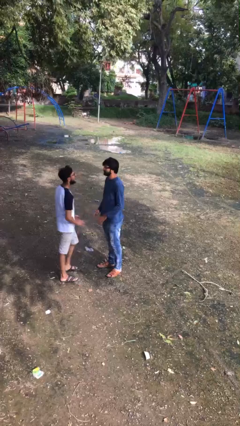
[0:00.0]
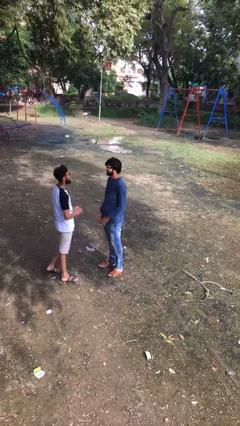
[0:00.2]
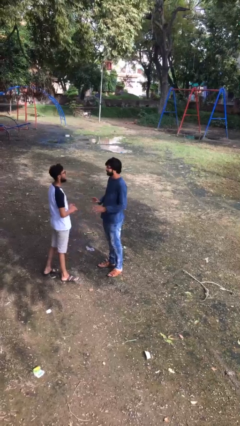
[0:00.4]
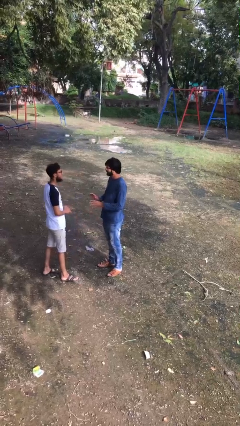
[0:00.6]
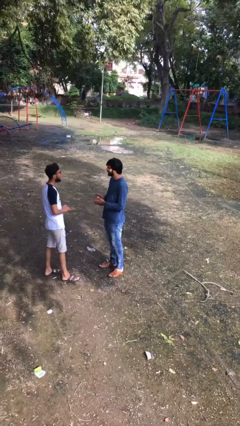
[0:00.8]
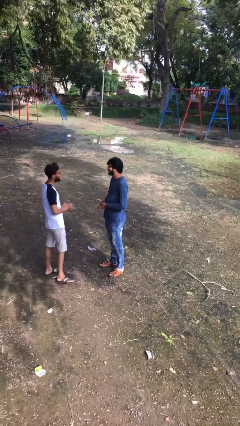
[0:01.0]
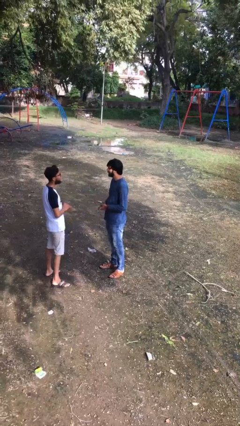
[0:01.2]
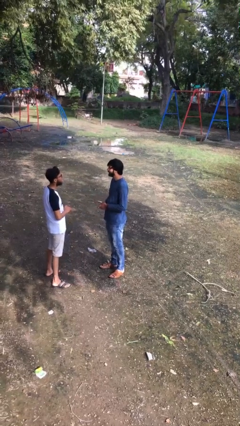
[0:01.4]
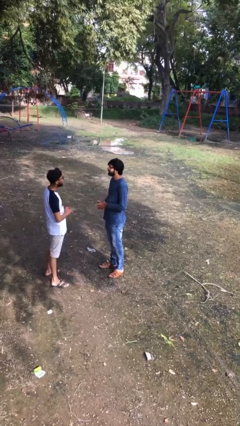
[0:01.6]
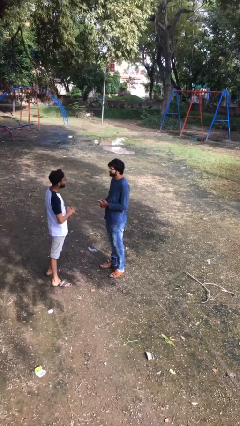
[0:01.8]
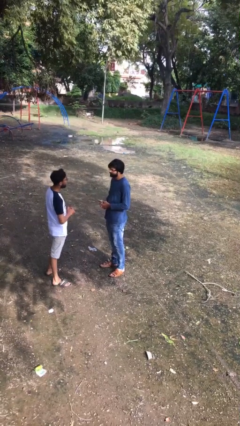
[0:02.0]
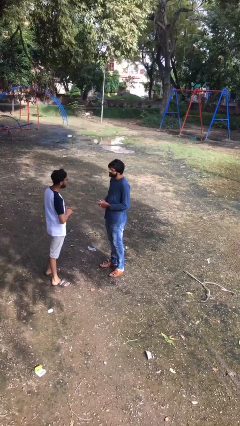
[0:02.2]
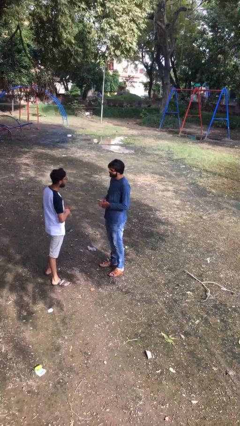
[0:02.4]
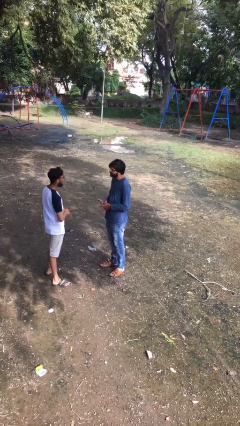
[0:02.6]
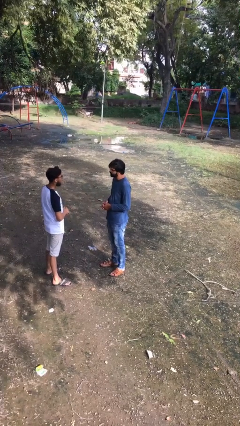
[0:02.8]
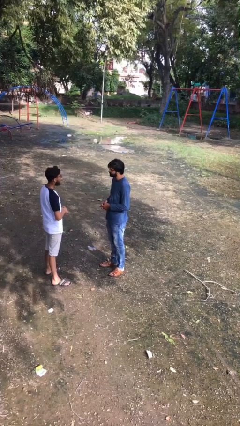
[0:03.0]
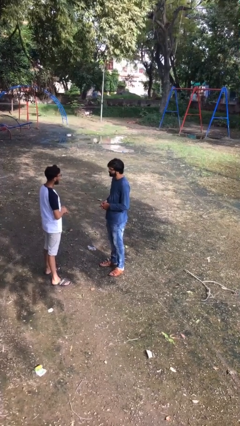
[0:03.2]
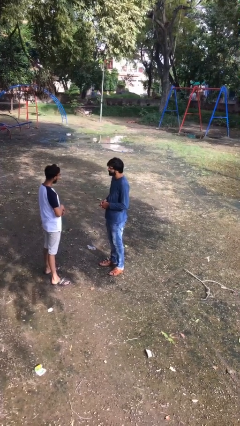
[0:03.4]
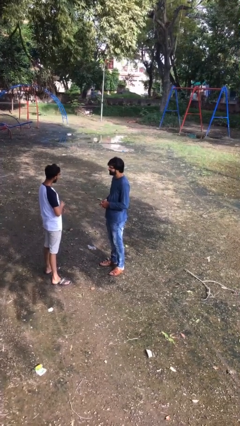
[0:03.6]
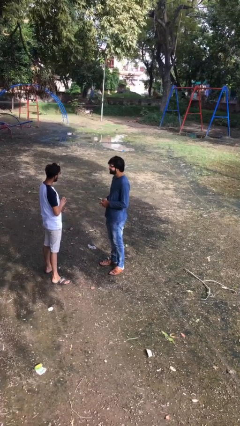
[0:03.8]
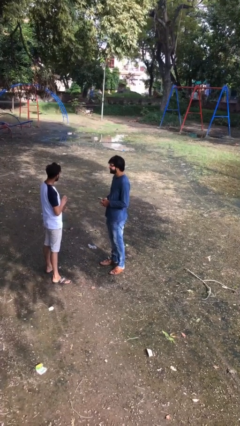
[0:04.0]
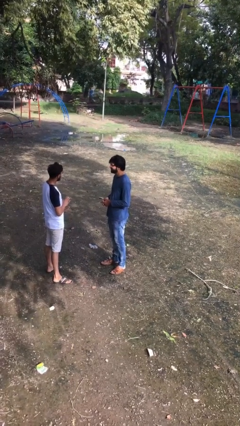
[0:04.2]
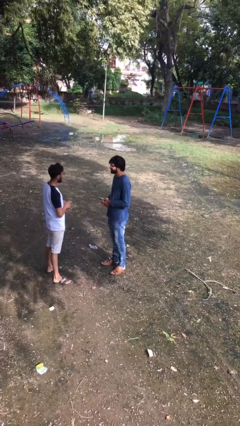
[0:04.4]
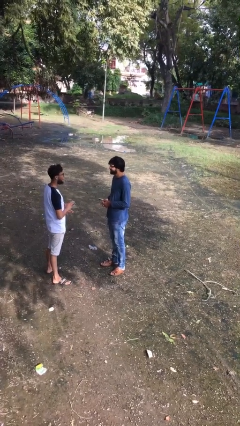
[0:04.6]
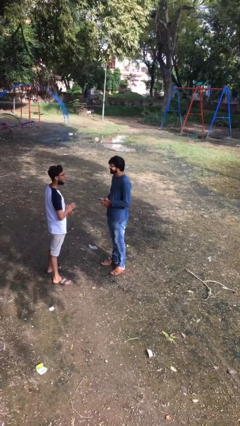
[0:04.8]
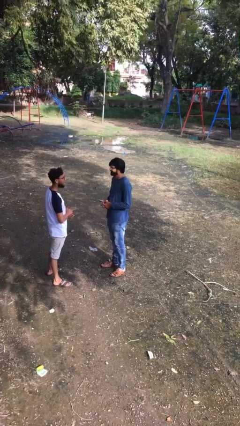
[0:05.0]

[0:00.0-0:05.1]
person talks to person

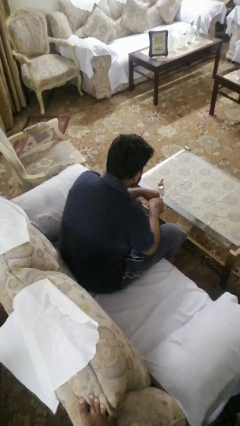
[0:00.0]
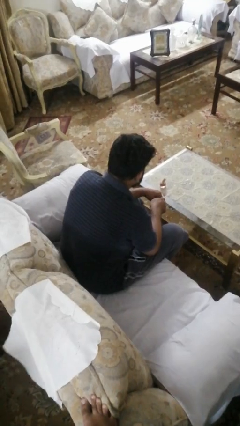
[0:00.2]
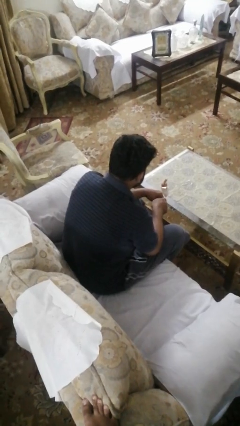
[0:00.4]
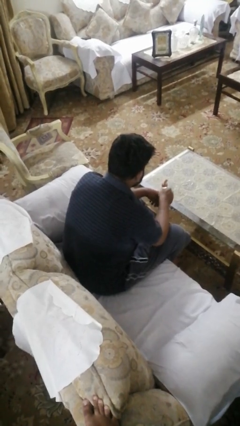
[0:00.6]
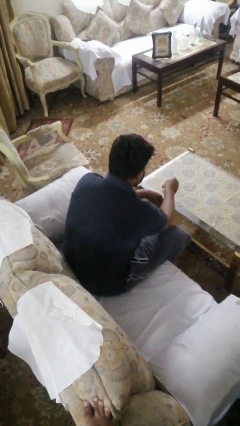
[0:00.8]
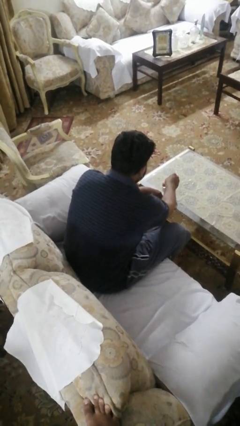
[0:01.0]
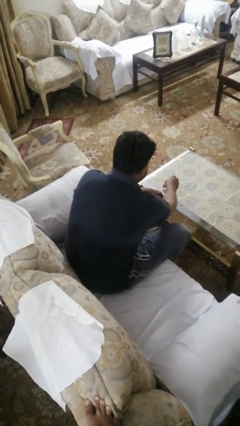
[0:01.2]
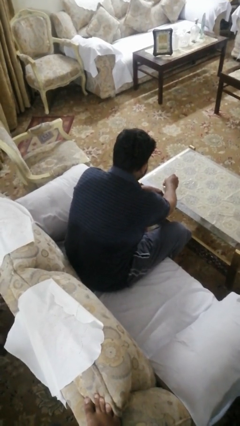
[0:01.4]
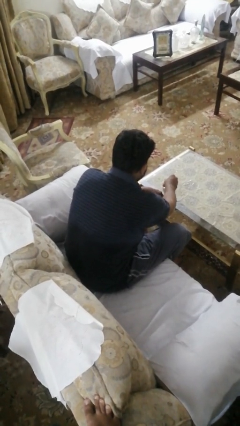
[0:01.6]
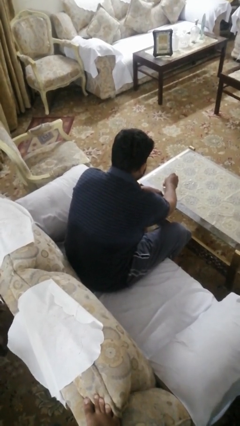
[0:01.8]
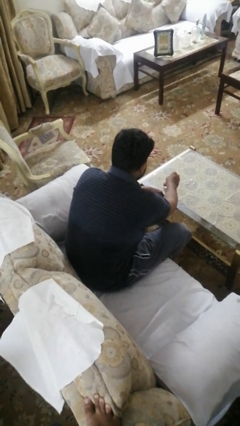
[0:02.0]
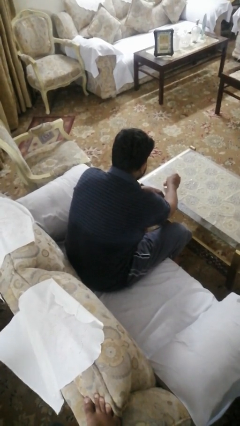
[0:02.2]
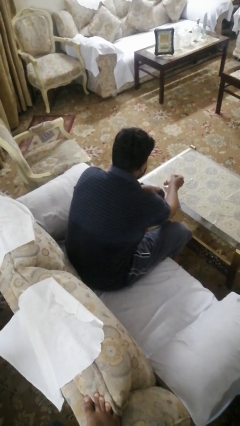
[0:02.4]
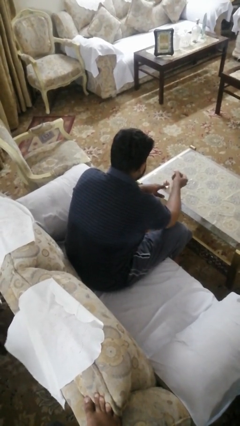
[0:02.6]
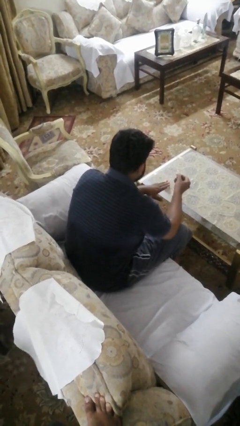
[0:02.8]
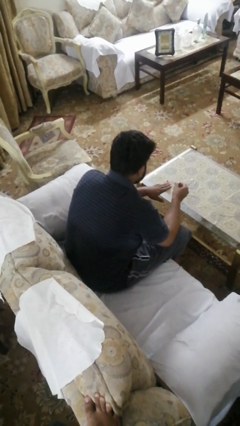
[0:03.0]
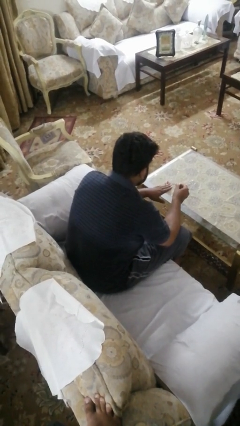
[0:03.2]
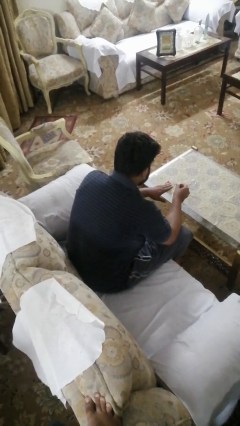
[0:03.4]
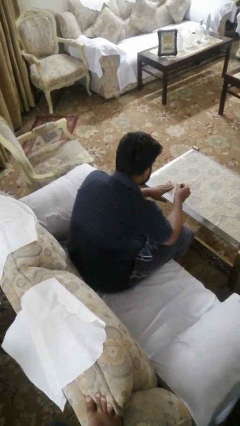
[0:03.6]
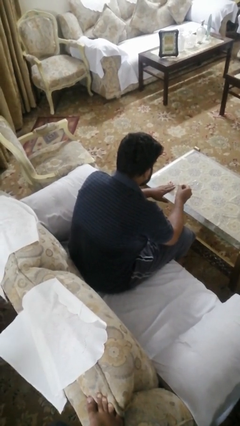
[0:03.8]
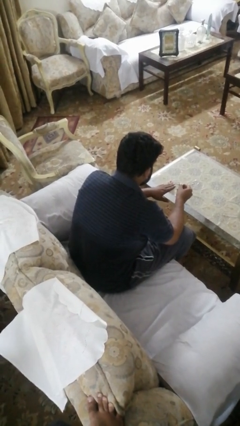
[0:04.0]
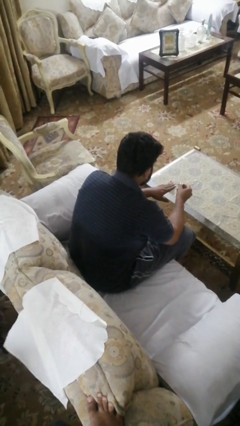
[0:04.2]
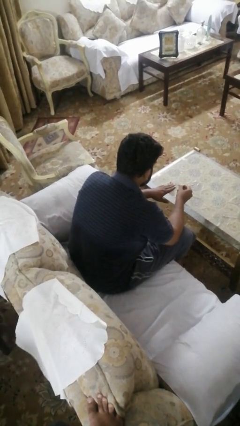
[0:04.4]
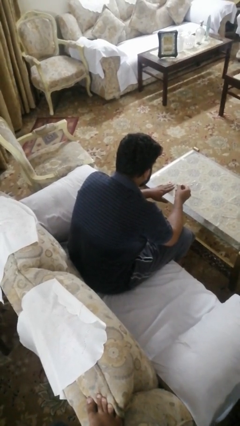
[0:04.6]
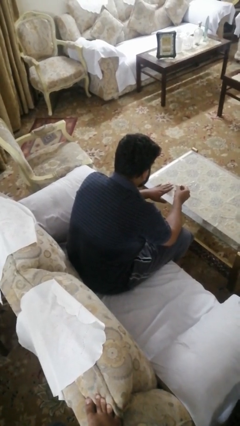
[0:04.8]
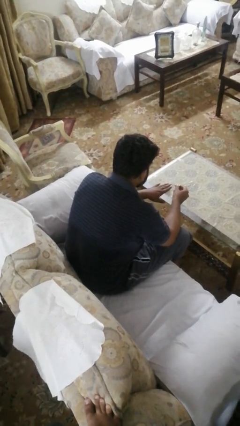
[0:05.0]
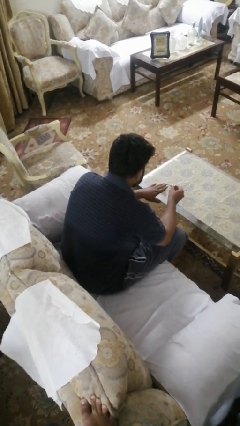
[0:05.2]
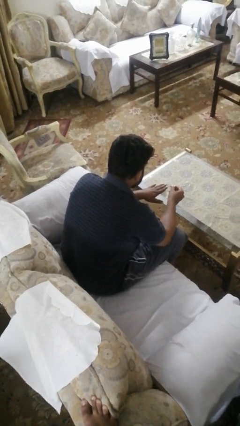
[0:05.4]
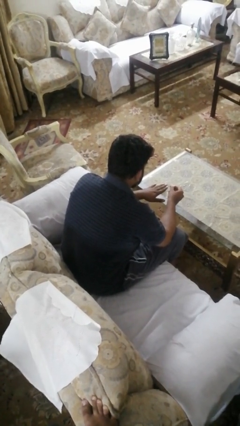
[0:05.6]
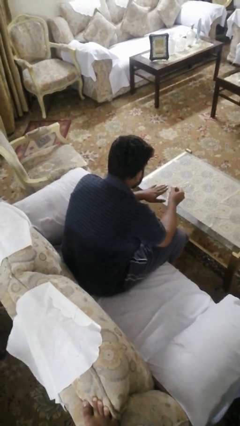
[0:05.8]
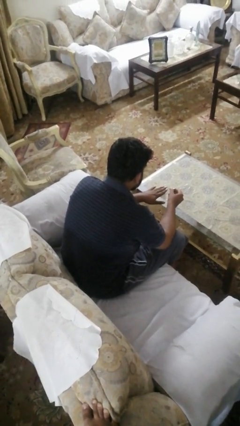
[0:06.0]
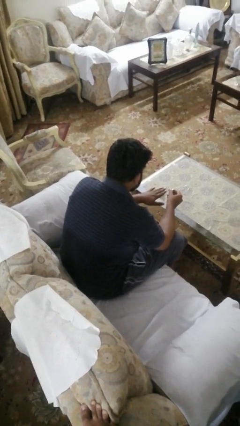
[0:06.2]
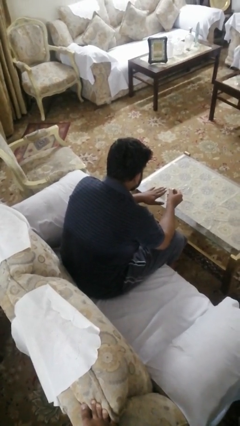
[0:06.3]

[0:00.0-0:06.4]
person paints fingernails

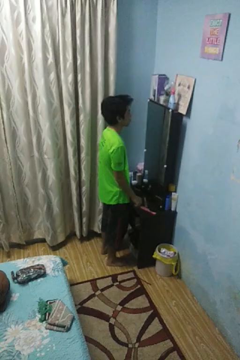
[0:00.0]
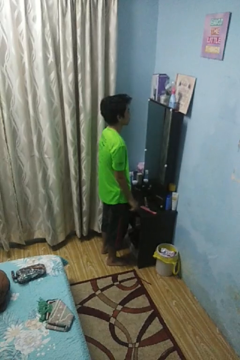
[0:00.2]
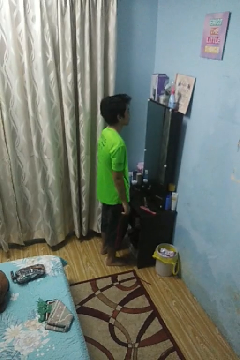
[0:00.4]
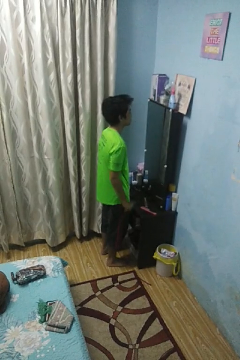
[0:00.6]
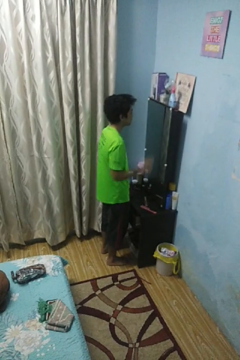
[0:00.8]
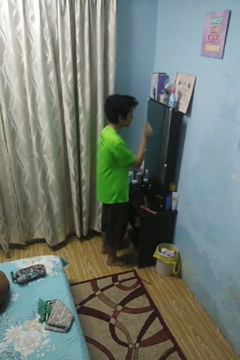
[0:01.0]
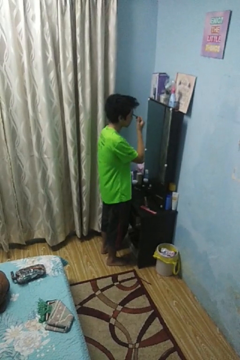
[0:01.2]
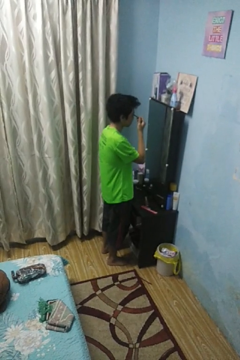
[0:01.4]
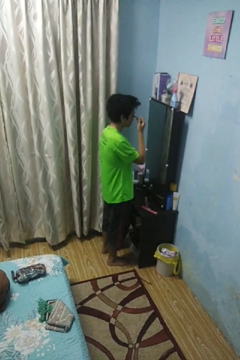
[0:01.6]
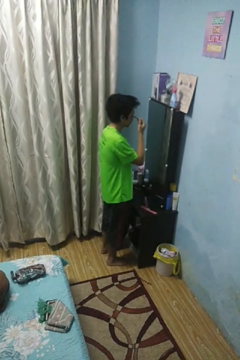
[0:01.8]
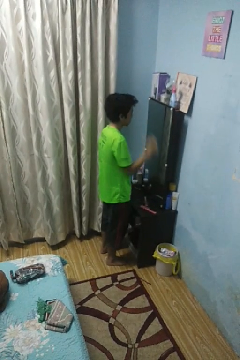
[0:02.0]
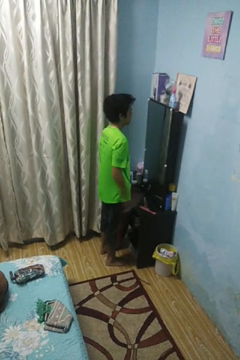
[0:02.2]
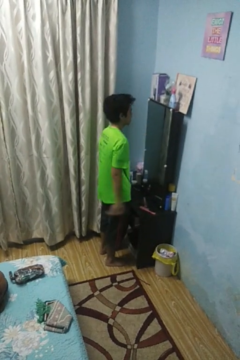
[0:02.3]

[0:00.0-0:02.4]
person applies eye makeup

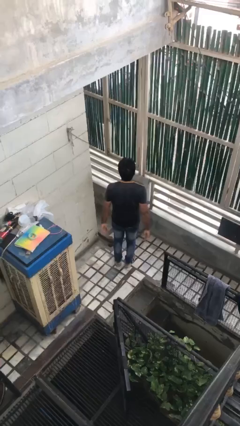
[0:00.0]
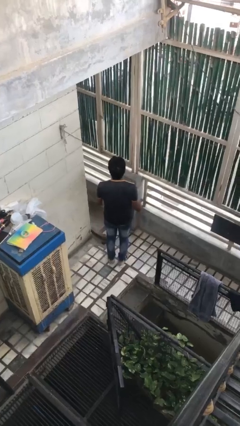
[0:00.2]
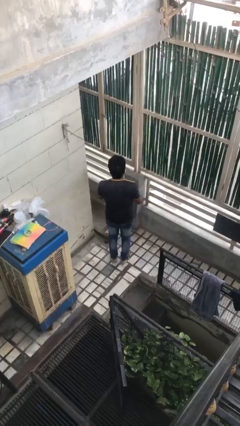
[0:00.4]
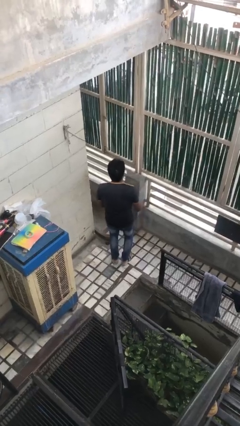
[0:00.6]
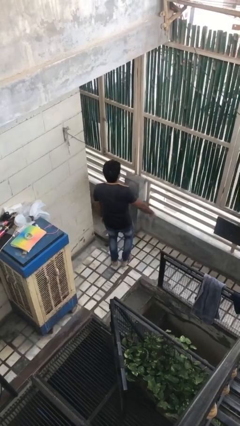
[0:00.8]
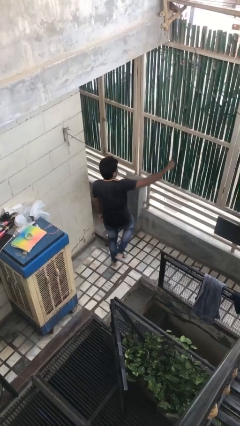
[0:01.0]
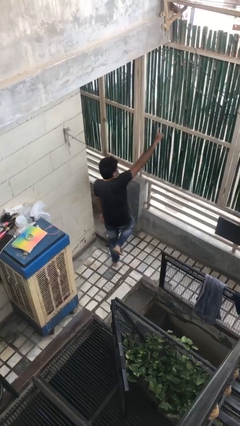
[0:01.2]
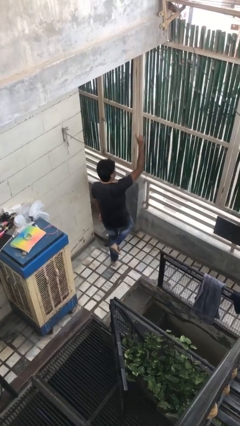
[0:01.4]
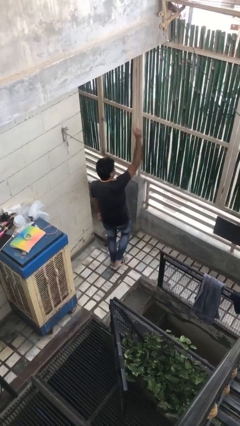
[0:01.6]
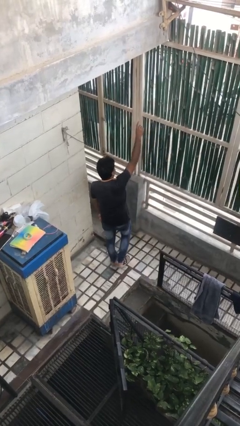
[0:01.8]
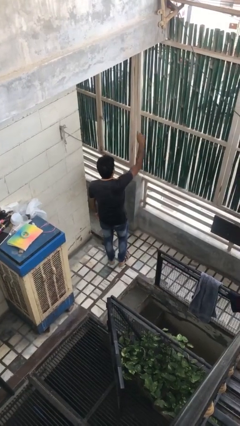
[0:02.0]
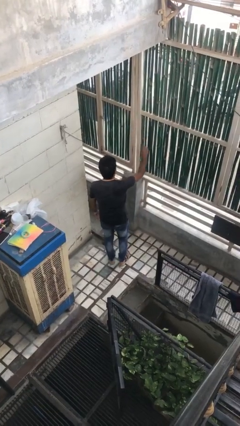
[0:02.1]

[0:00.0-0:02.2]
person dances in place

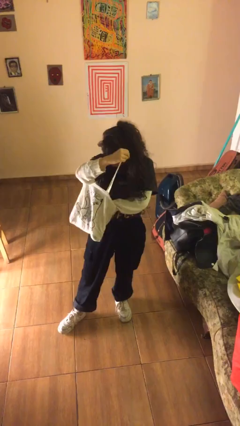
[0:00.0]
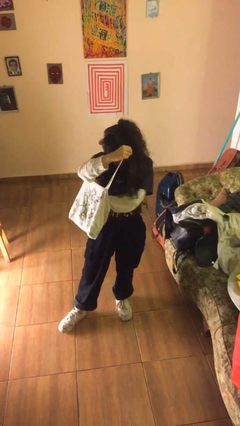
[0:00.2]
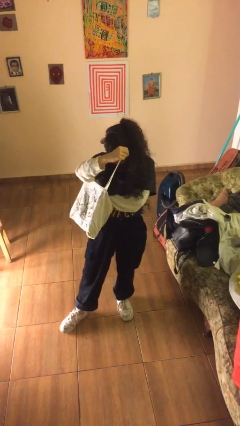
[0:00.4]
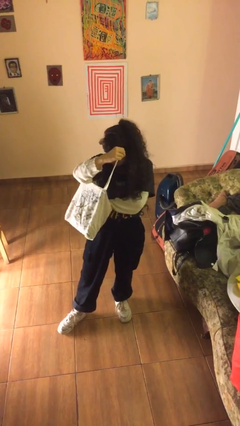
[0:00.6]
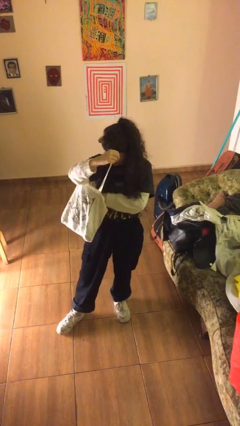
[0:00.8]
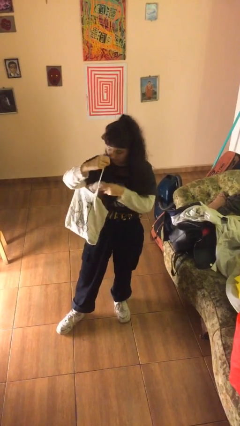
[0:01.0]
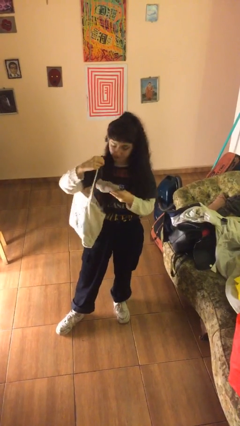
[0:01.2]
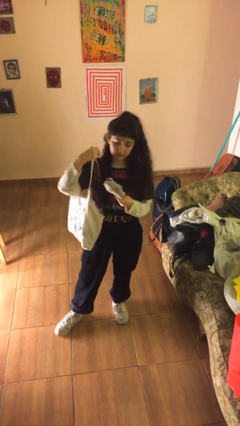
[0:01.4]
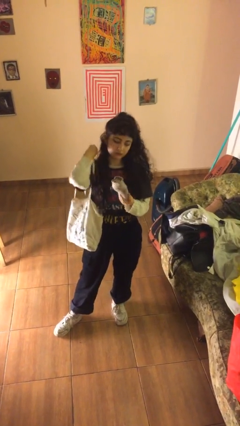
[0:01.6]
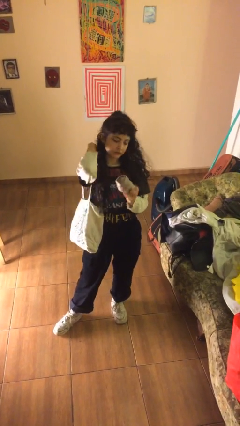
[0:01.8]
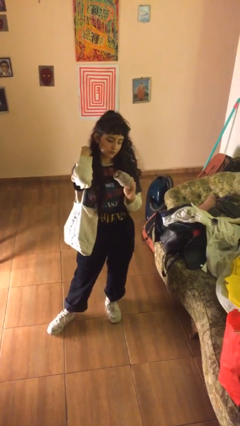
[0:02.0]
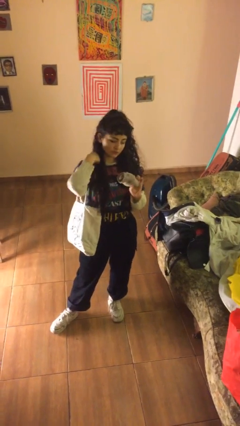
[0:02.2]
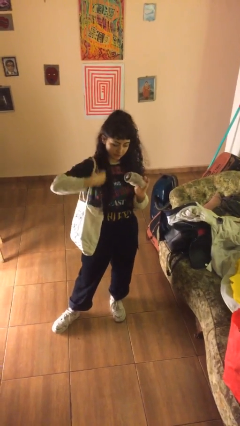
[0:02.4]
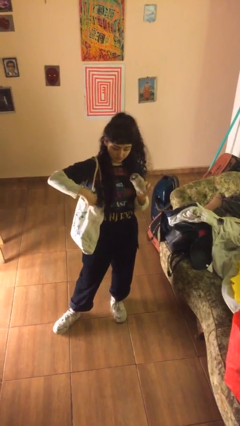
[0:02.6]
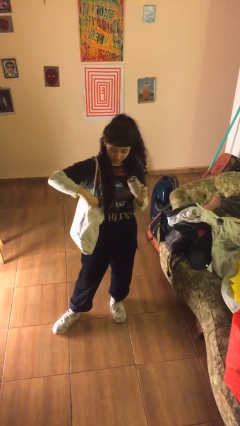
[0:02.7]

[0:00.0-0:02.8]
person takes object from purse
